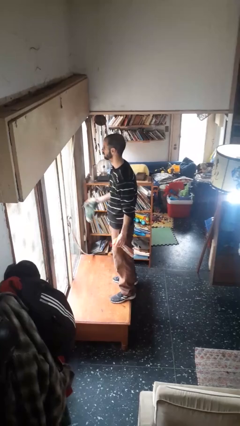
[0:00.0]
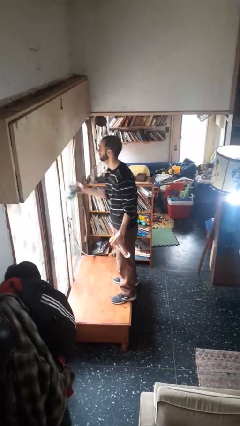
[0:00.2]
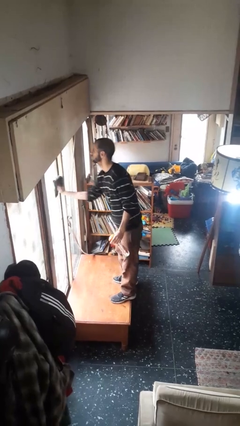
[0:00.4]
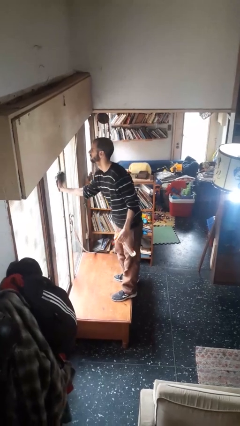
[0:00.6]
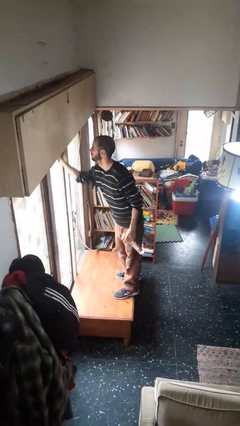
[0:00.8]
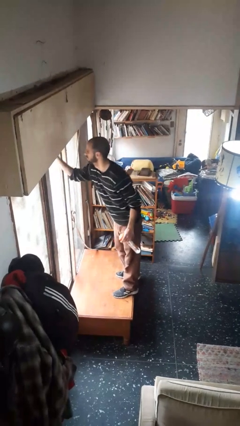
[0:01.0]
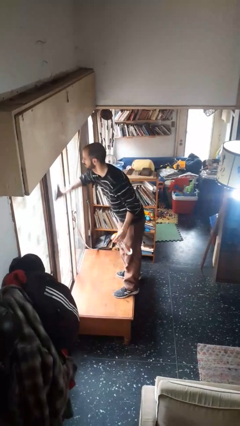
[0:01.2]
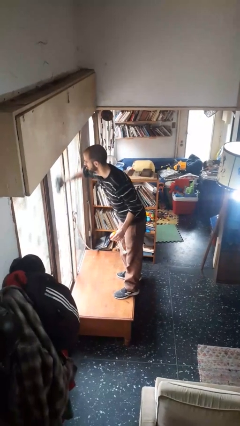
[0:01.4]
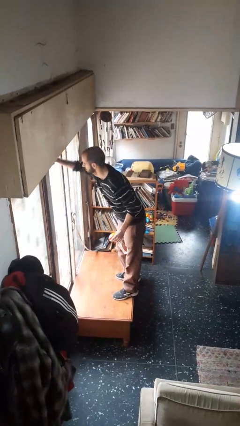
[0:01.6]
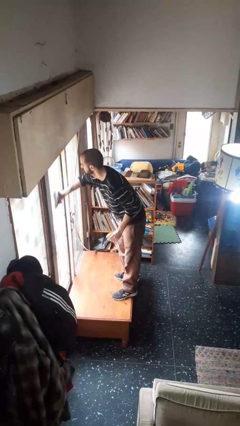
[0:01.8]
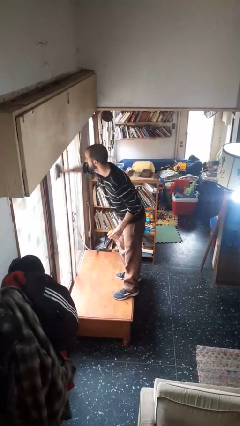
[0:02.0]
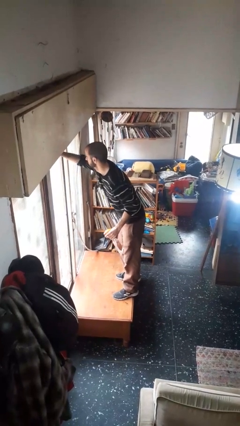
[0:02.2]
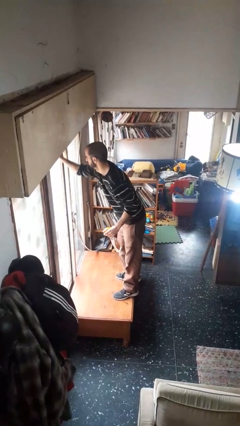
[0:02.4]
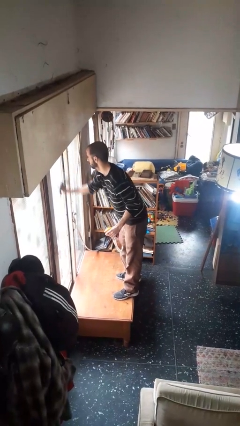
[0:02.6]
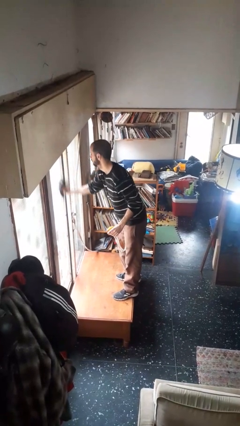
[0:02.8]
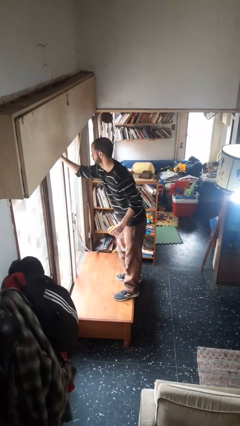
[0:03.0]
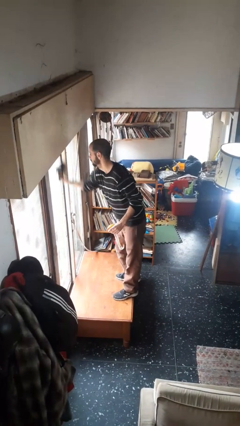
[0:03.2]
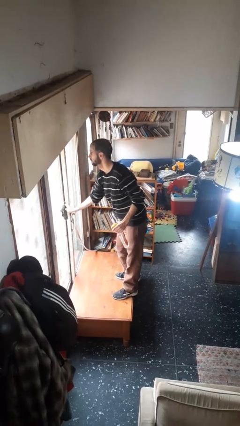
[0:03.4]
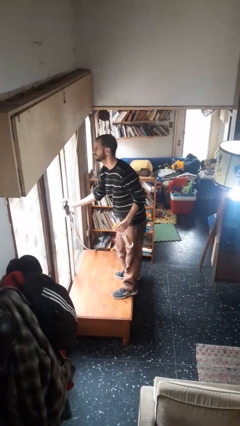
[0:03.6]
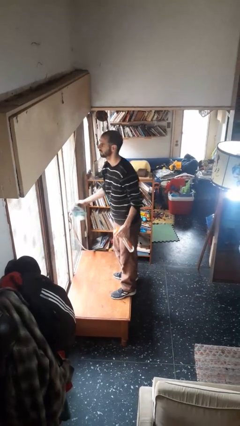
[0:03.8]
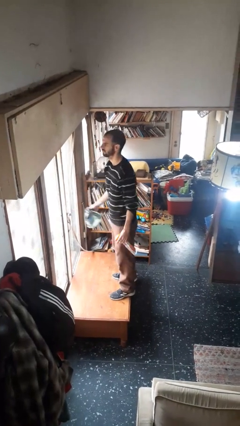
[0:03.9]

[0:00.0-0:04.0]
person washes window

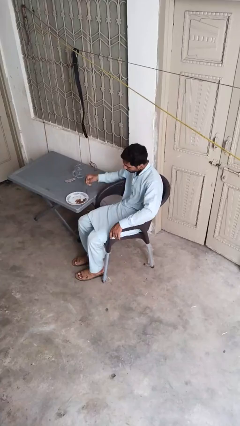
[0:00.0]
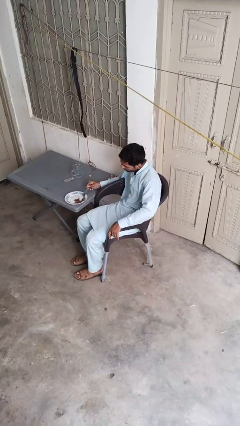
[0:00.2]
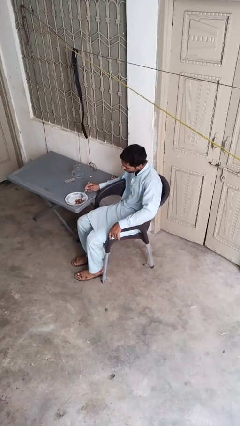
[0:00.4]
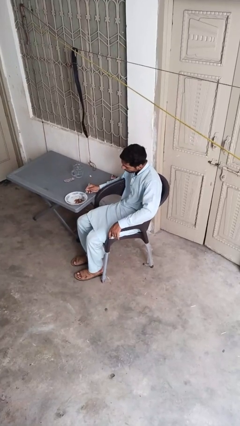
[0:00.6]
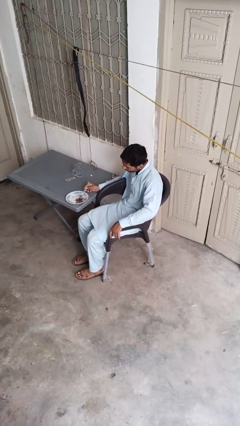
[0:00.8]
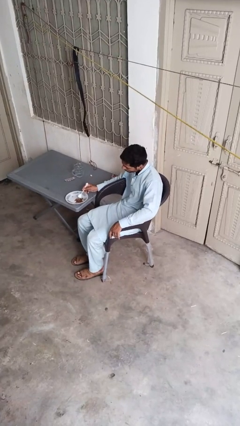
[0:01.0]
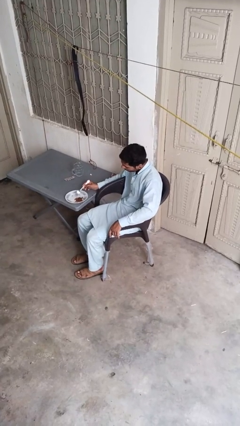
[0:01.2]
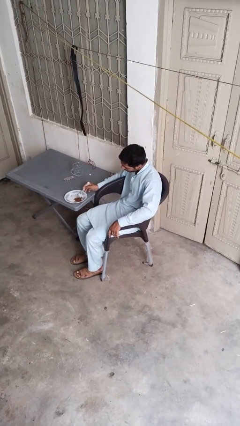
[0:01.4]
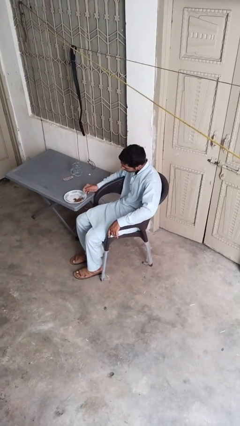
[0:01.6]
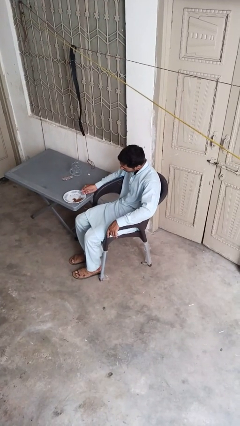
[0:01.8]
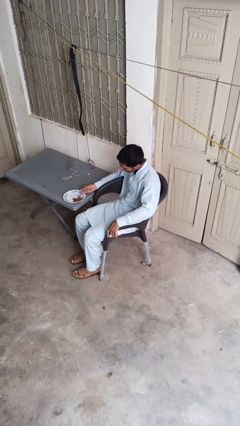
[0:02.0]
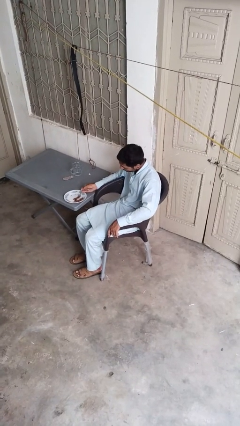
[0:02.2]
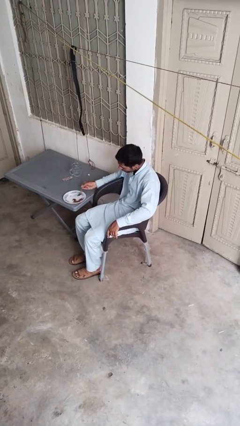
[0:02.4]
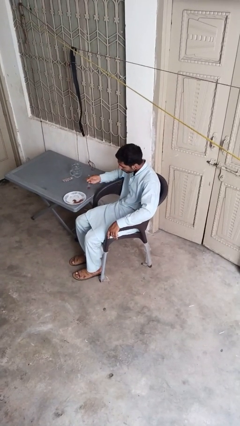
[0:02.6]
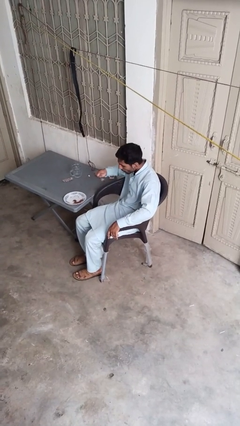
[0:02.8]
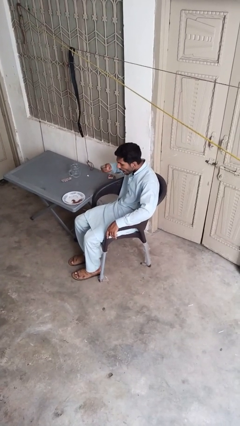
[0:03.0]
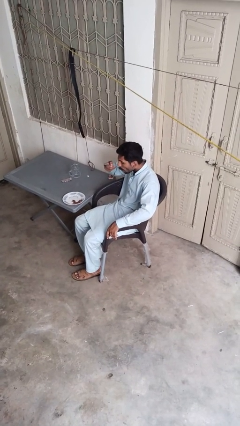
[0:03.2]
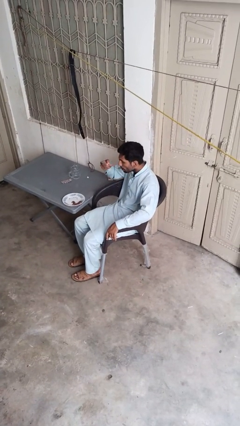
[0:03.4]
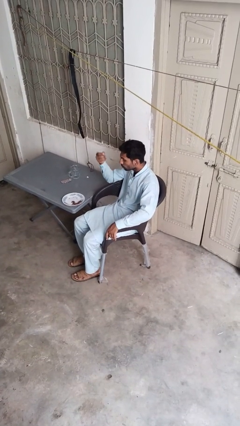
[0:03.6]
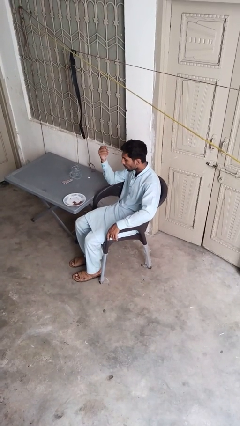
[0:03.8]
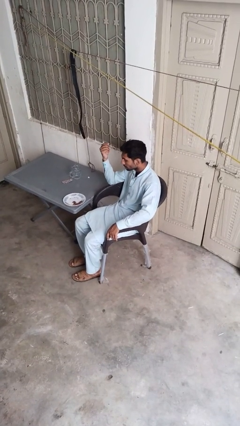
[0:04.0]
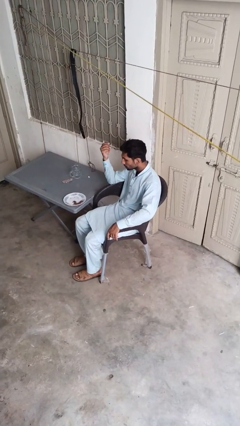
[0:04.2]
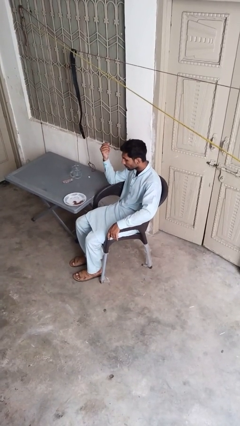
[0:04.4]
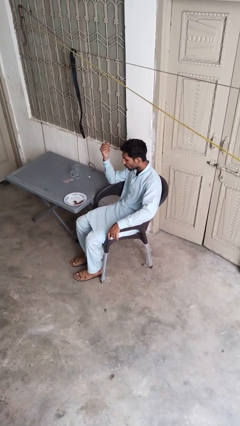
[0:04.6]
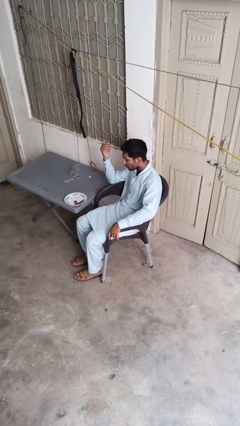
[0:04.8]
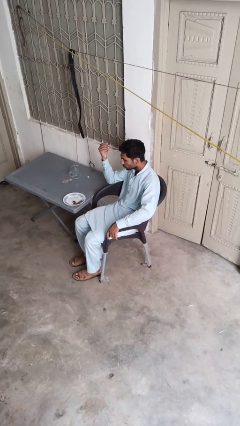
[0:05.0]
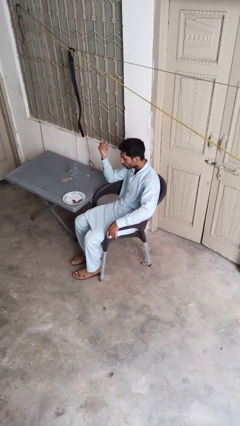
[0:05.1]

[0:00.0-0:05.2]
person eats with utensil

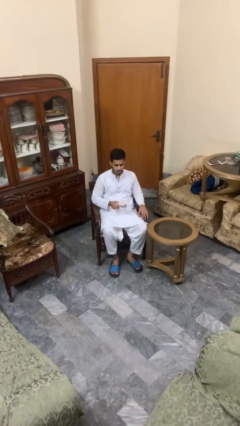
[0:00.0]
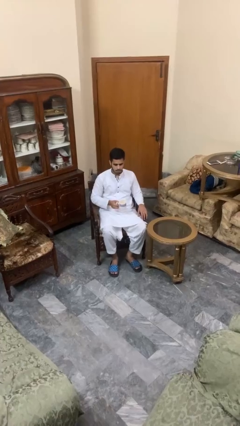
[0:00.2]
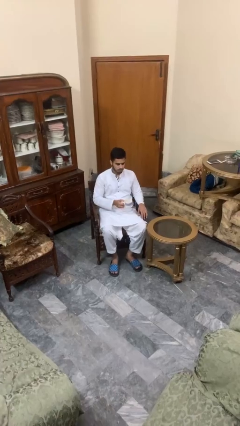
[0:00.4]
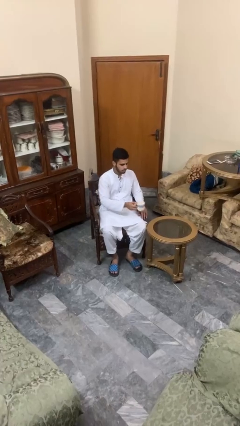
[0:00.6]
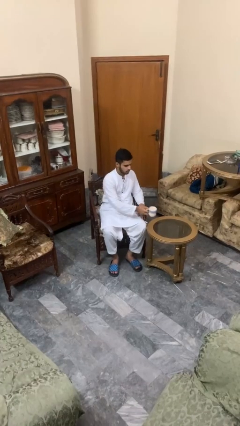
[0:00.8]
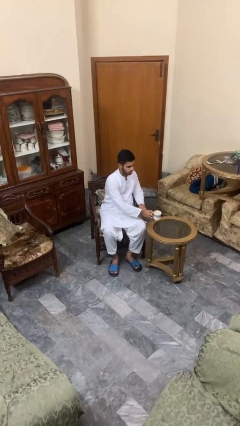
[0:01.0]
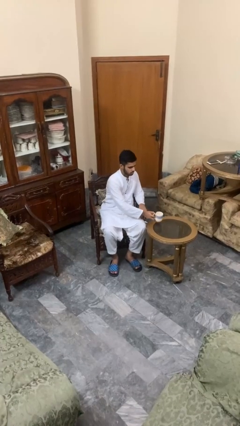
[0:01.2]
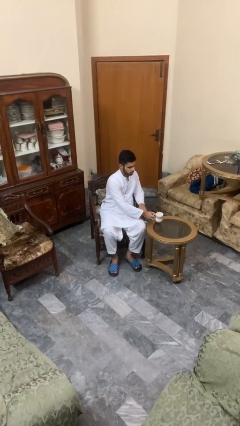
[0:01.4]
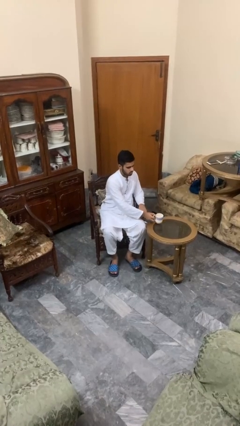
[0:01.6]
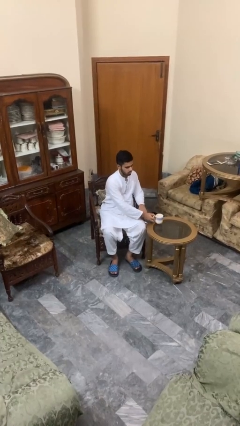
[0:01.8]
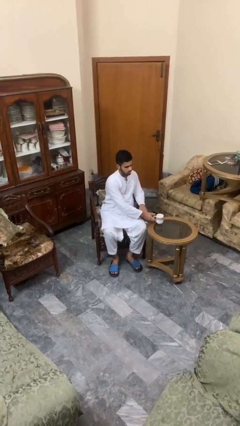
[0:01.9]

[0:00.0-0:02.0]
person puts down object on table

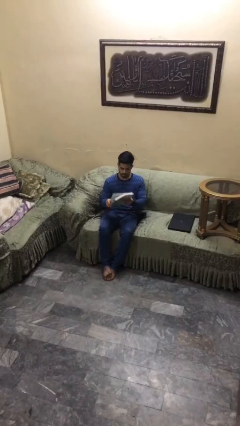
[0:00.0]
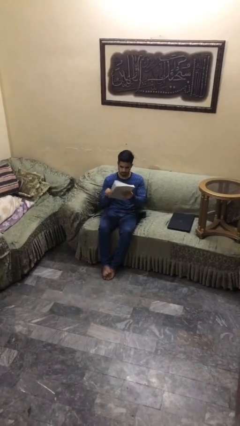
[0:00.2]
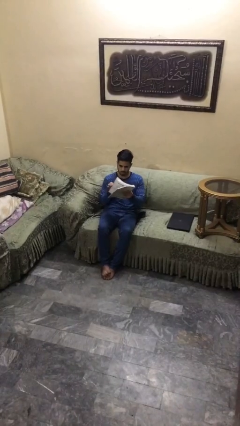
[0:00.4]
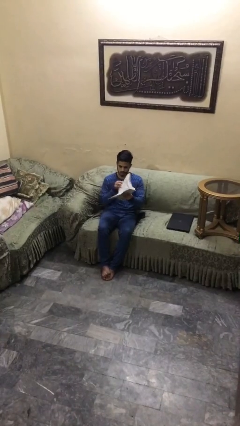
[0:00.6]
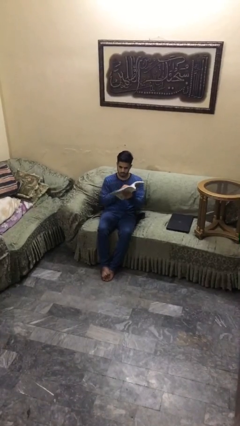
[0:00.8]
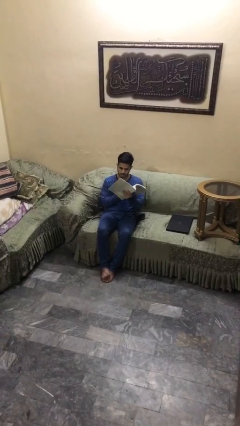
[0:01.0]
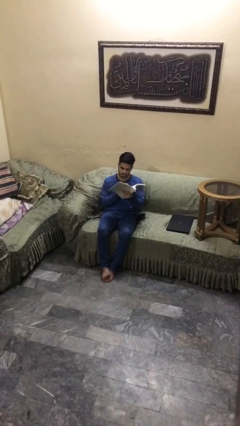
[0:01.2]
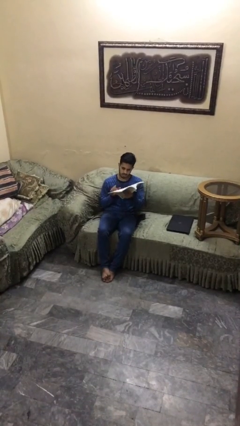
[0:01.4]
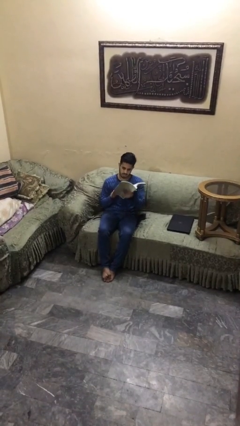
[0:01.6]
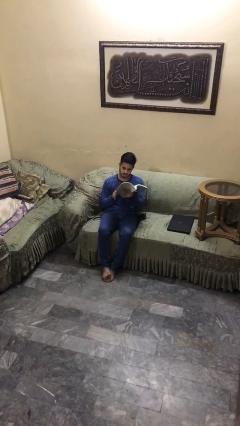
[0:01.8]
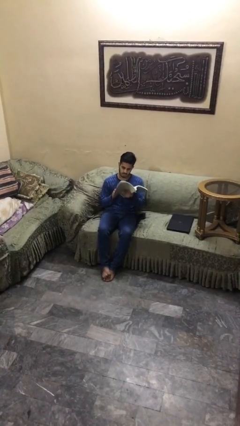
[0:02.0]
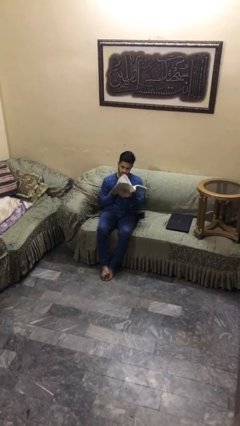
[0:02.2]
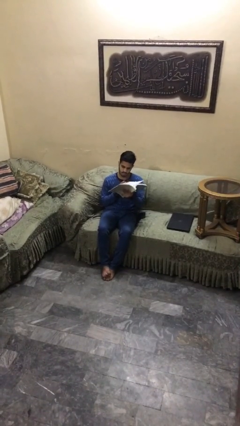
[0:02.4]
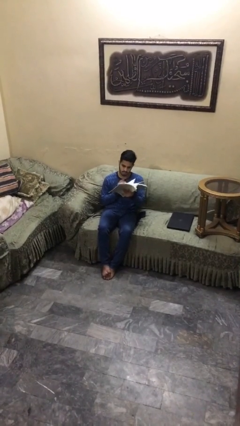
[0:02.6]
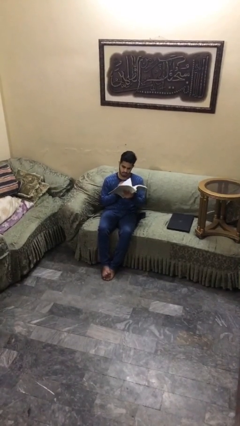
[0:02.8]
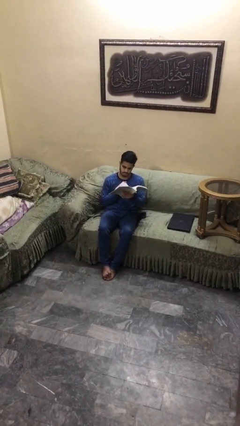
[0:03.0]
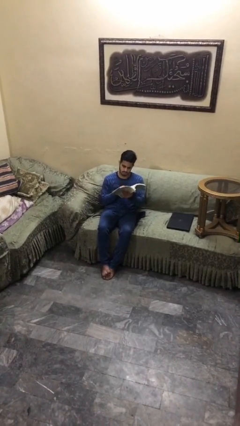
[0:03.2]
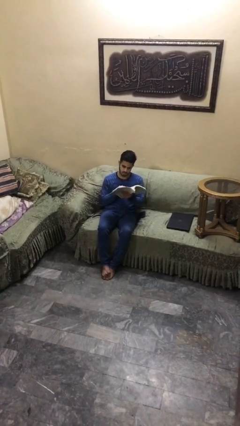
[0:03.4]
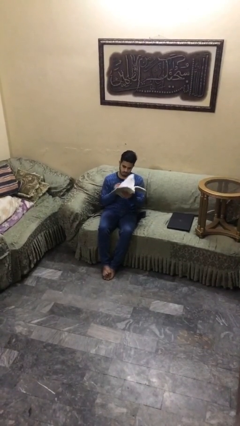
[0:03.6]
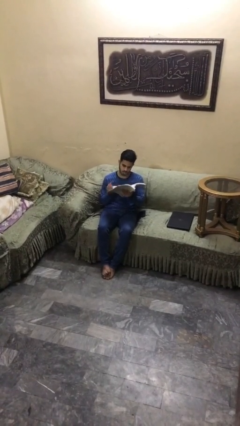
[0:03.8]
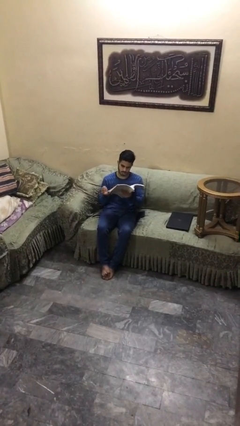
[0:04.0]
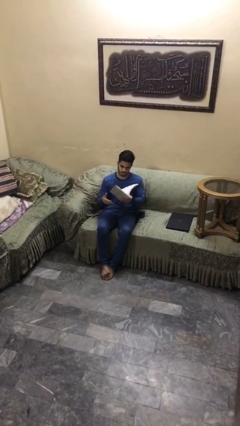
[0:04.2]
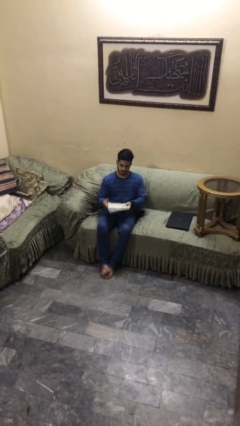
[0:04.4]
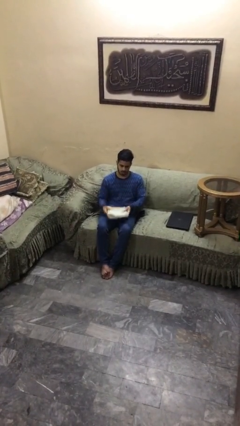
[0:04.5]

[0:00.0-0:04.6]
person reads document

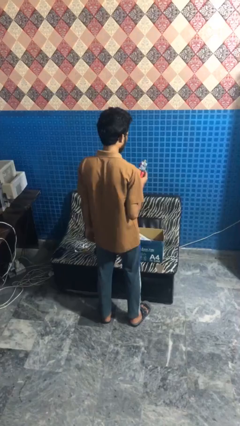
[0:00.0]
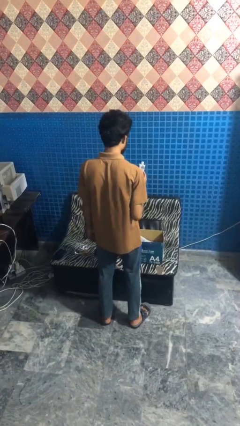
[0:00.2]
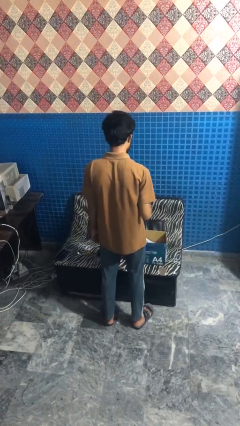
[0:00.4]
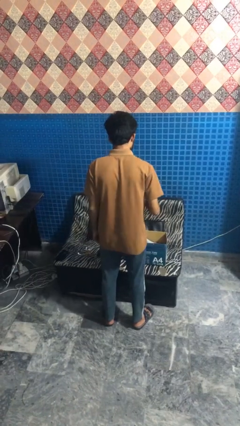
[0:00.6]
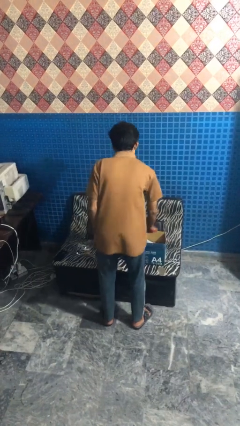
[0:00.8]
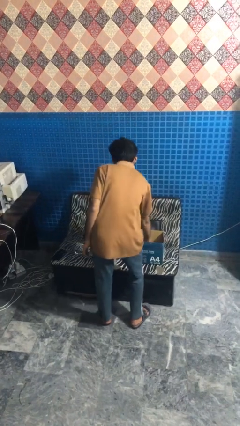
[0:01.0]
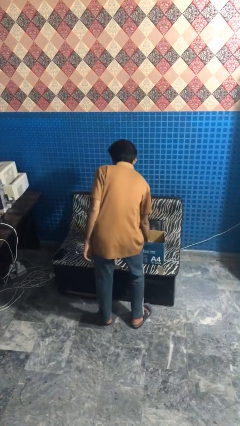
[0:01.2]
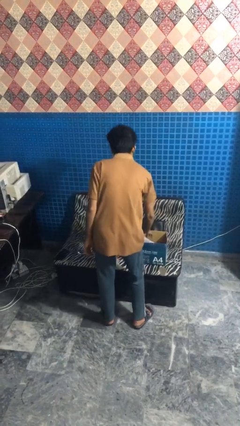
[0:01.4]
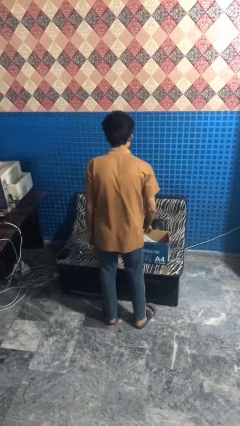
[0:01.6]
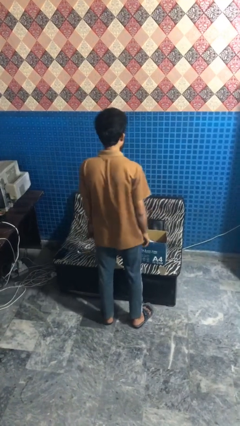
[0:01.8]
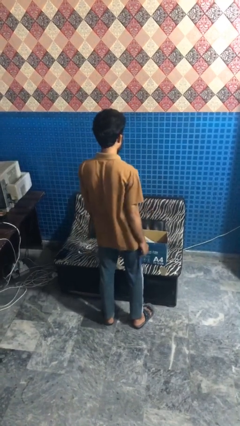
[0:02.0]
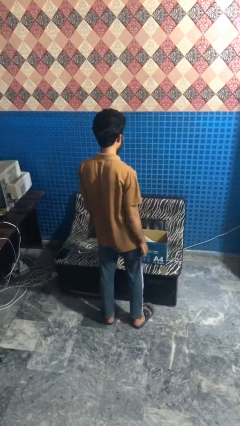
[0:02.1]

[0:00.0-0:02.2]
person puts object into box
